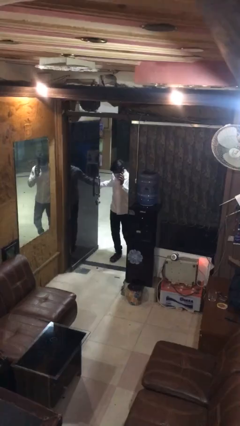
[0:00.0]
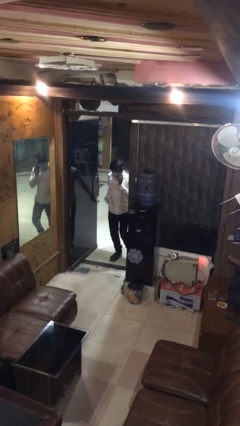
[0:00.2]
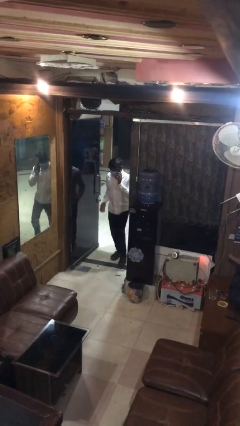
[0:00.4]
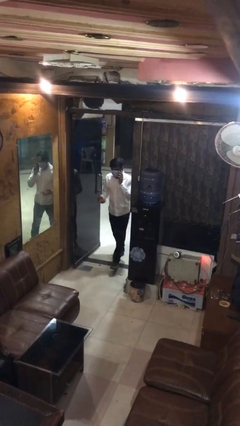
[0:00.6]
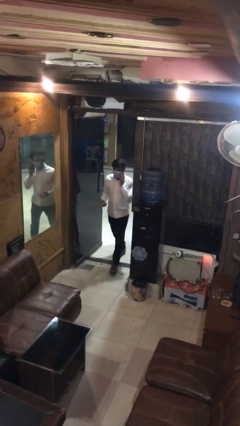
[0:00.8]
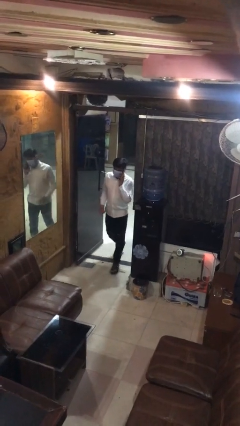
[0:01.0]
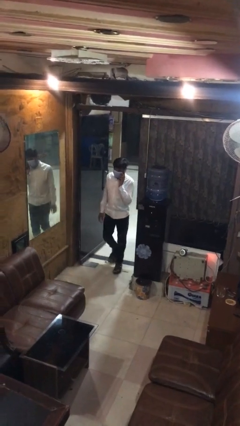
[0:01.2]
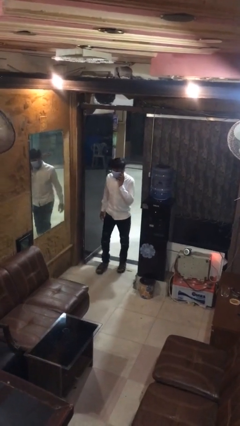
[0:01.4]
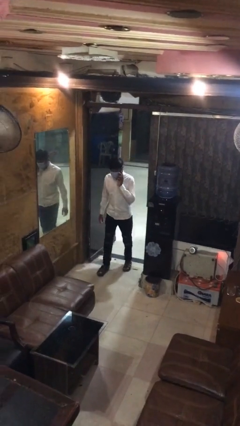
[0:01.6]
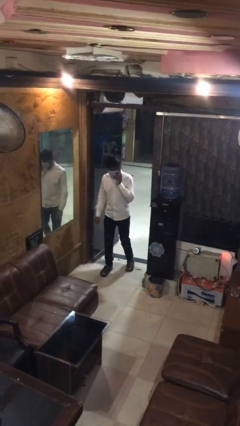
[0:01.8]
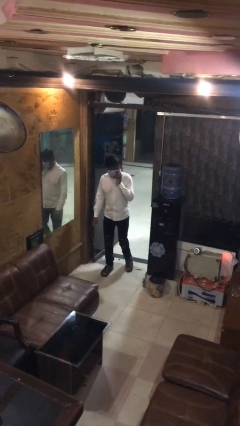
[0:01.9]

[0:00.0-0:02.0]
person enters scene through structure

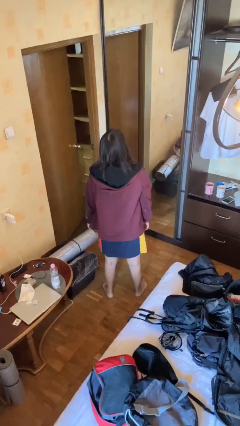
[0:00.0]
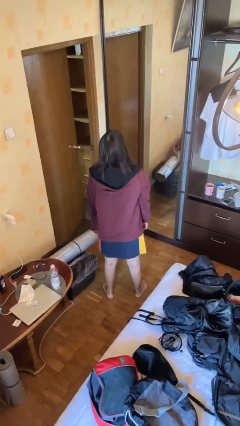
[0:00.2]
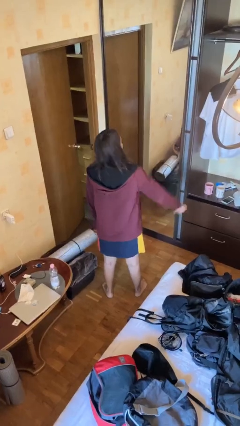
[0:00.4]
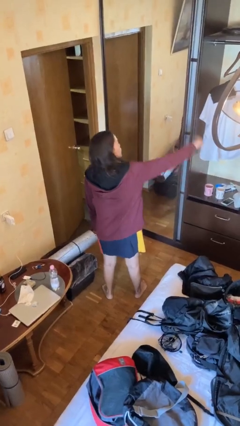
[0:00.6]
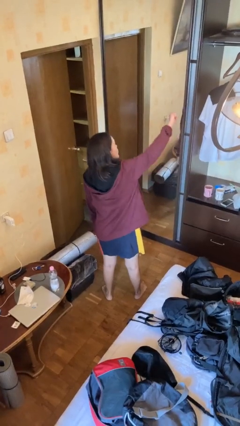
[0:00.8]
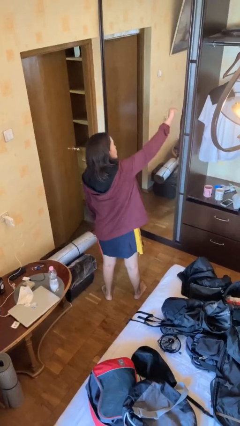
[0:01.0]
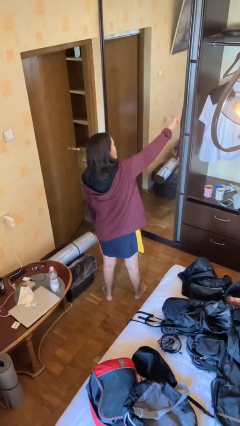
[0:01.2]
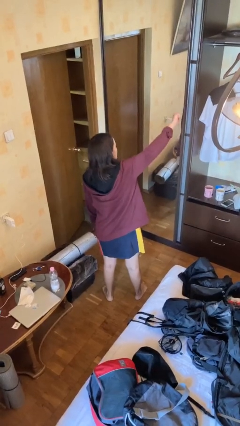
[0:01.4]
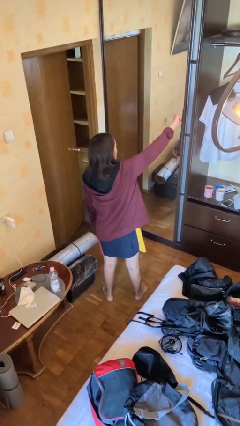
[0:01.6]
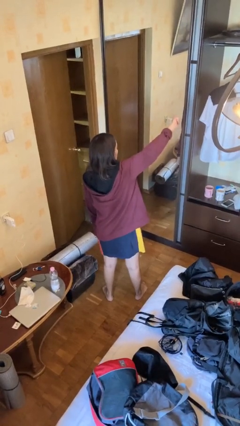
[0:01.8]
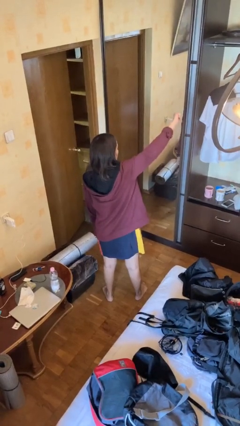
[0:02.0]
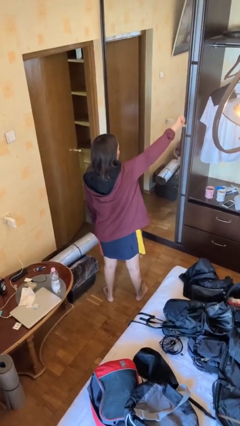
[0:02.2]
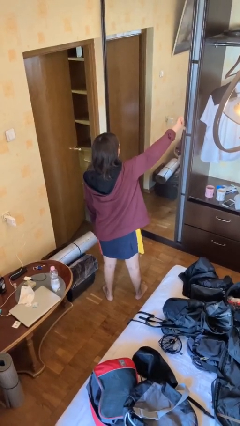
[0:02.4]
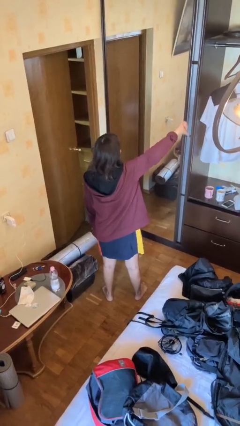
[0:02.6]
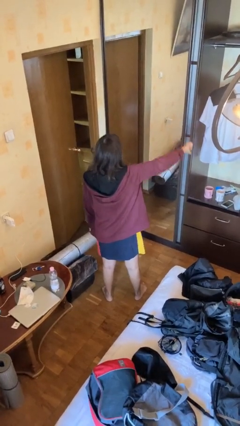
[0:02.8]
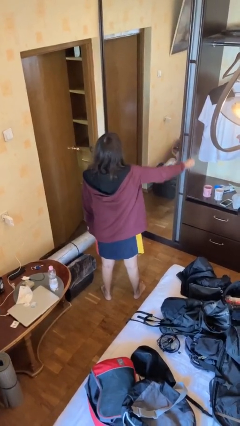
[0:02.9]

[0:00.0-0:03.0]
person gestures thumbs down

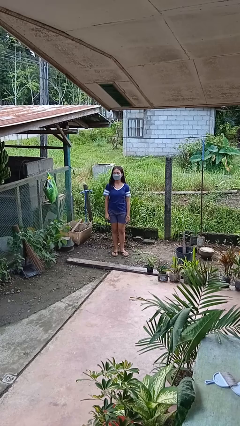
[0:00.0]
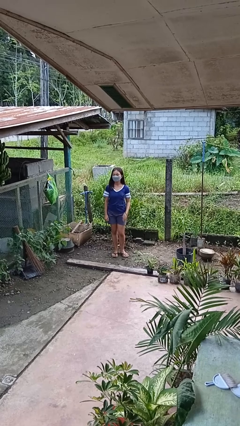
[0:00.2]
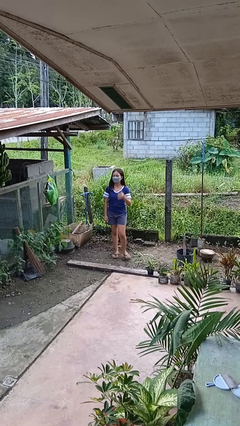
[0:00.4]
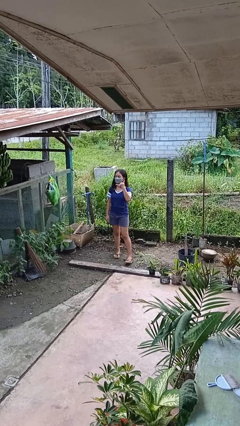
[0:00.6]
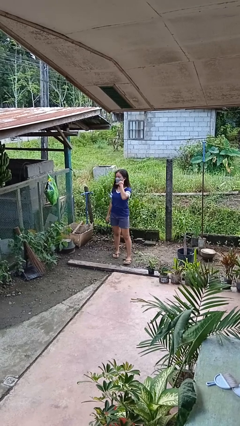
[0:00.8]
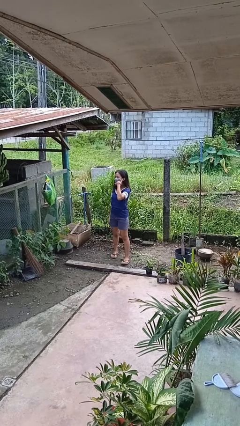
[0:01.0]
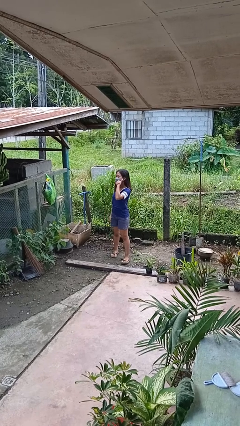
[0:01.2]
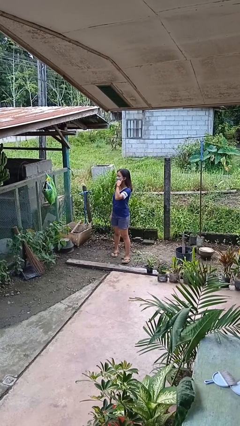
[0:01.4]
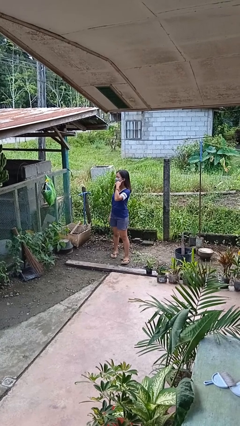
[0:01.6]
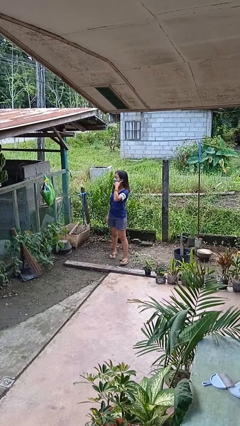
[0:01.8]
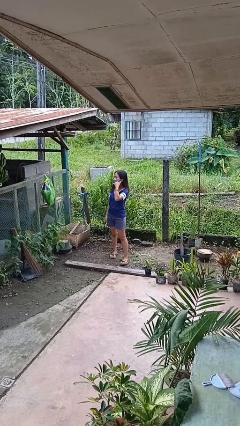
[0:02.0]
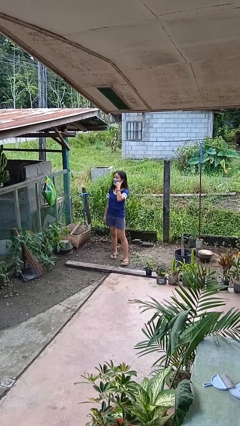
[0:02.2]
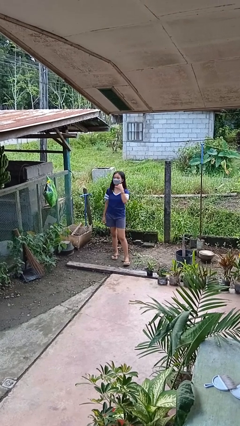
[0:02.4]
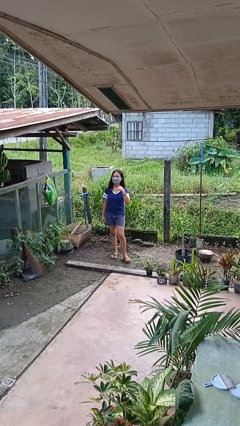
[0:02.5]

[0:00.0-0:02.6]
person gestures call me

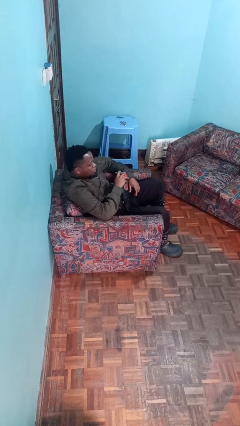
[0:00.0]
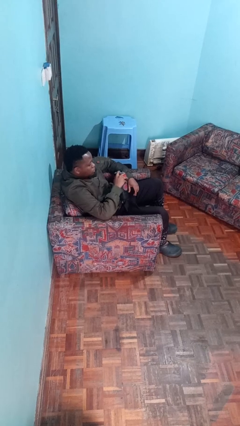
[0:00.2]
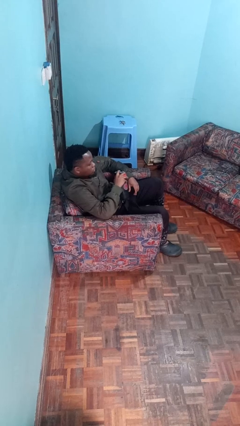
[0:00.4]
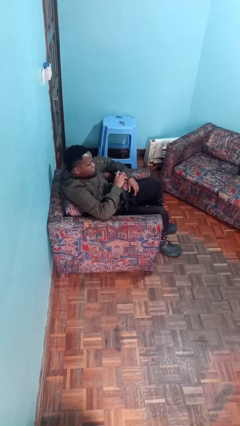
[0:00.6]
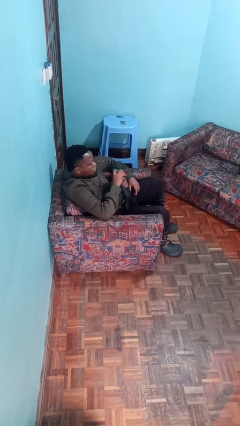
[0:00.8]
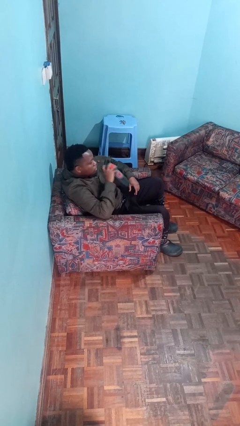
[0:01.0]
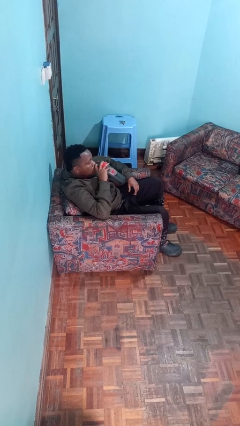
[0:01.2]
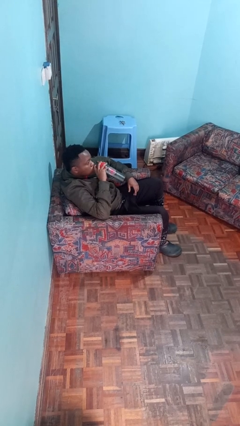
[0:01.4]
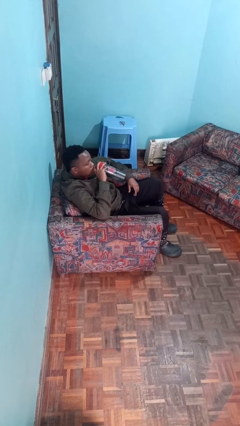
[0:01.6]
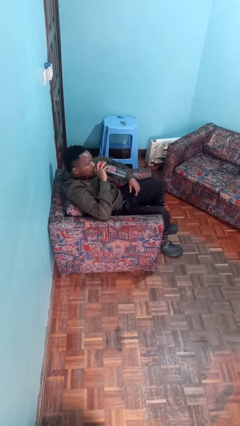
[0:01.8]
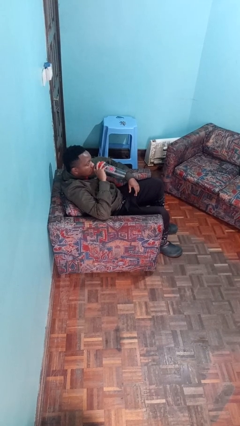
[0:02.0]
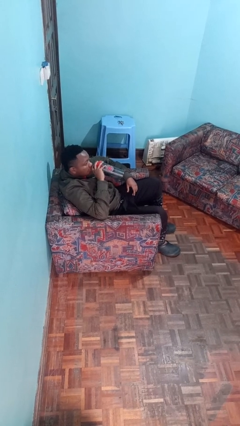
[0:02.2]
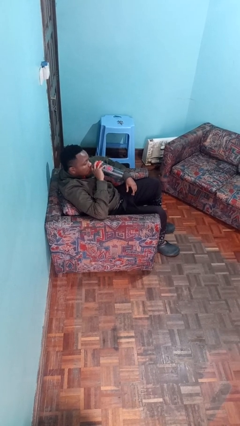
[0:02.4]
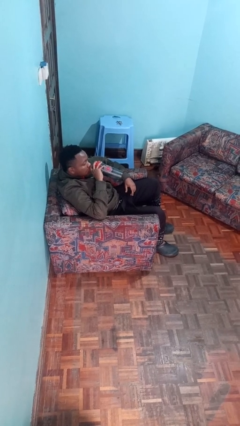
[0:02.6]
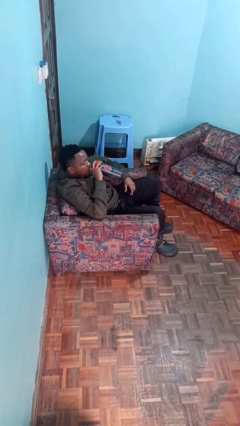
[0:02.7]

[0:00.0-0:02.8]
person drinks from bottle

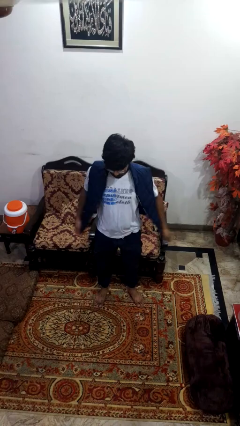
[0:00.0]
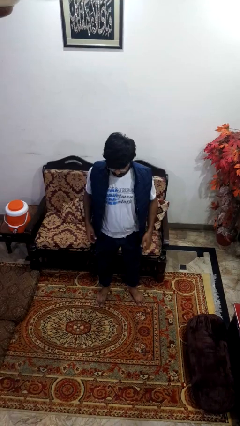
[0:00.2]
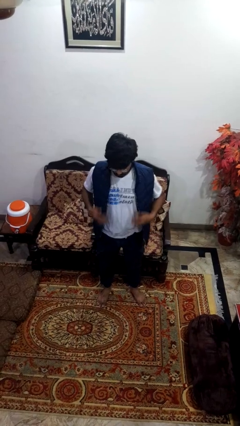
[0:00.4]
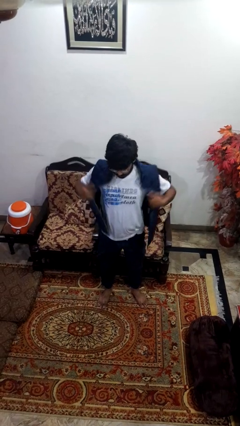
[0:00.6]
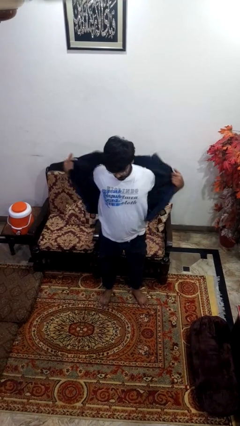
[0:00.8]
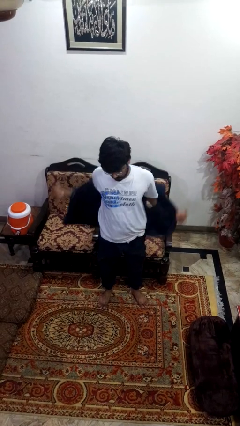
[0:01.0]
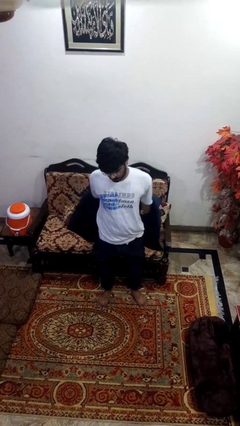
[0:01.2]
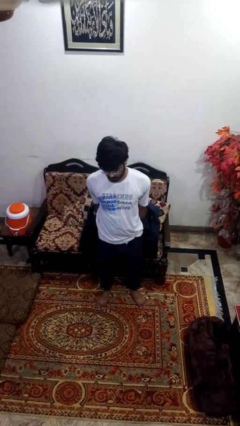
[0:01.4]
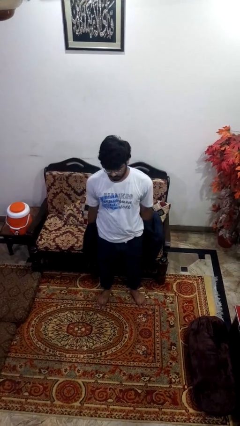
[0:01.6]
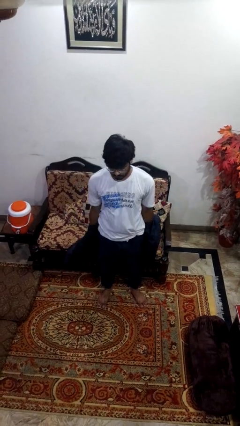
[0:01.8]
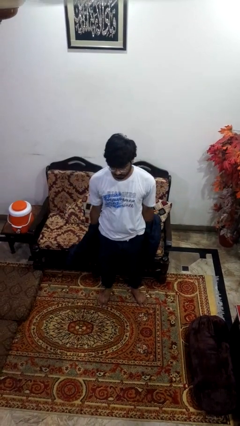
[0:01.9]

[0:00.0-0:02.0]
person takes off jacket

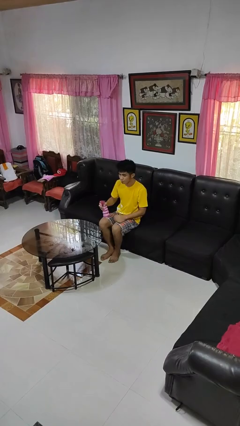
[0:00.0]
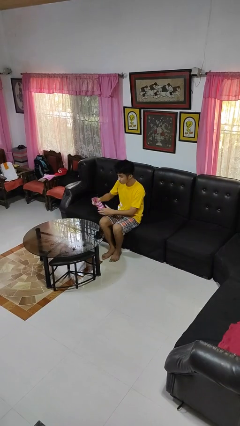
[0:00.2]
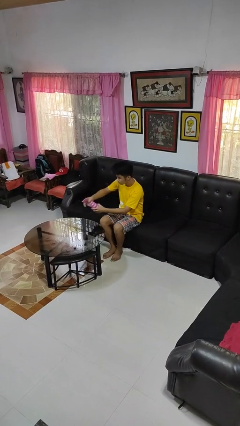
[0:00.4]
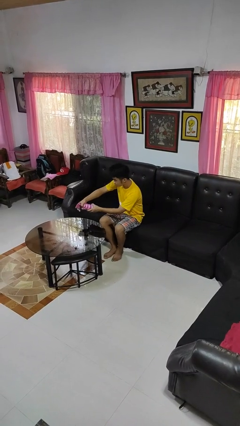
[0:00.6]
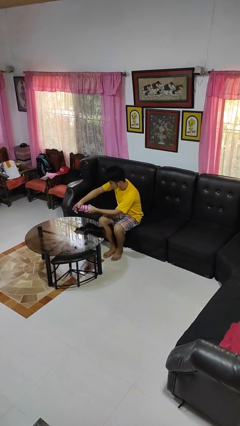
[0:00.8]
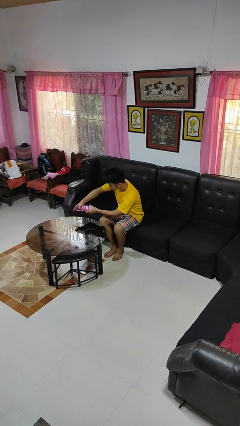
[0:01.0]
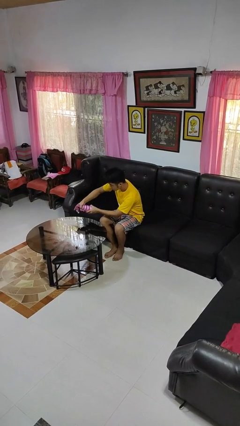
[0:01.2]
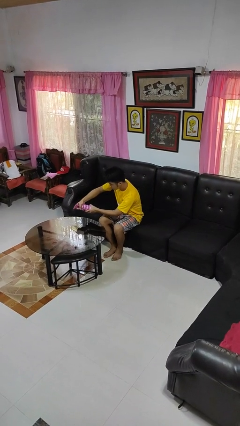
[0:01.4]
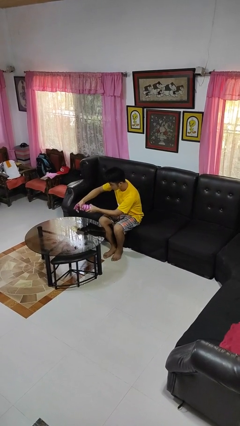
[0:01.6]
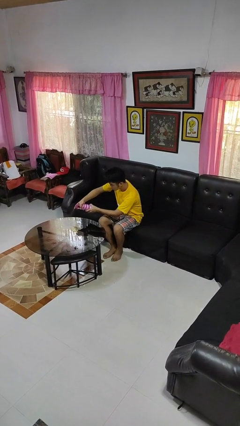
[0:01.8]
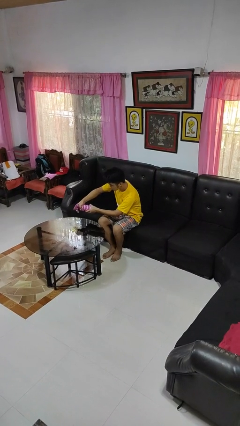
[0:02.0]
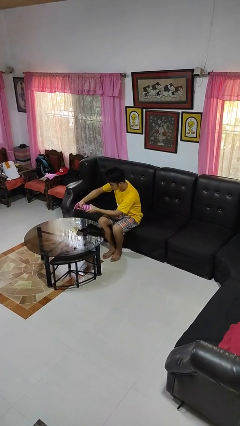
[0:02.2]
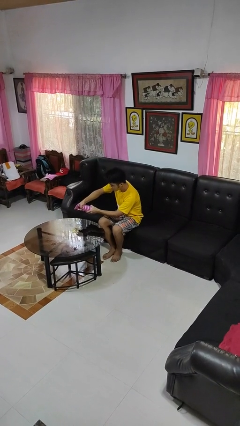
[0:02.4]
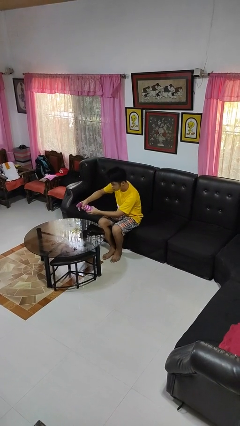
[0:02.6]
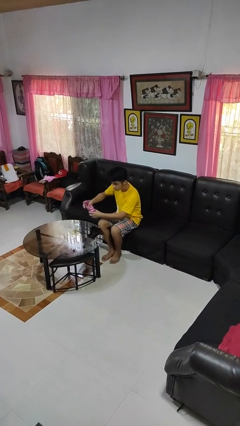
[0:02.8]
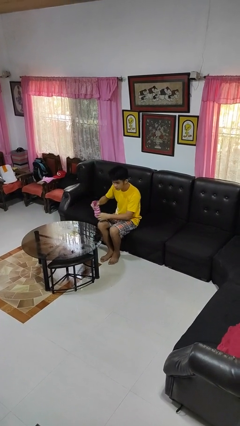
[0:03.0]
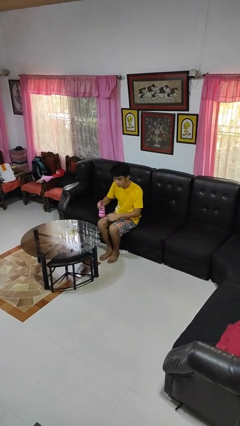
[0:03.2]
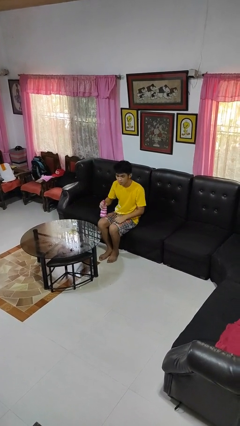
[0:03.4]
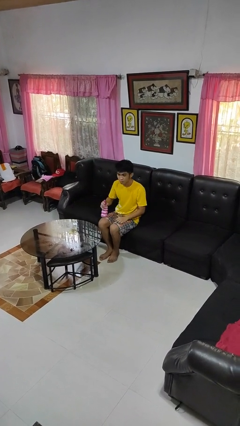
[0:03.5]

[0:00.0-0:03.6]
person sprays from bottle

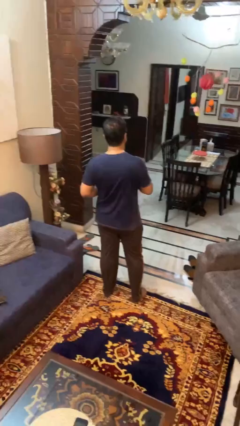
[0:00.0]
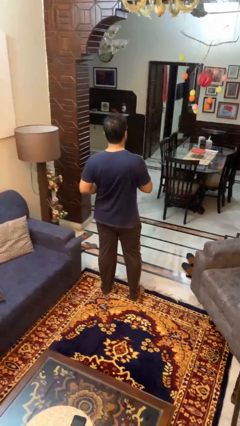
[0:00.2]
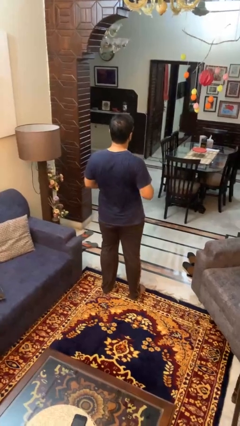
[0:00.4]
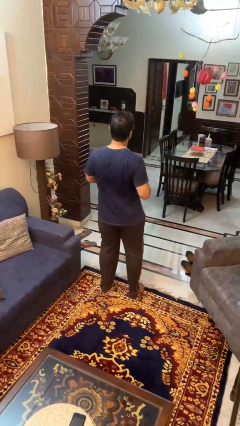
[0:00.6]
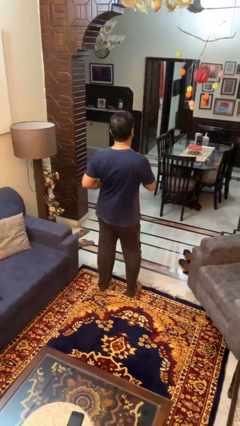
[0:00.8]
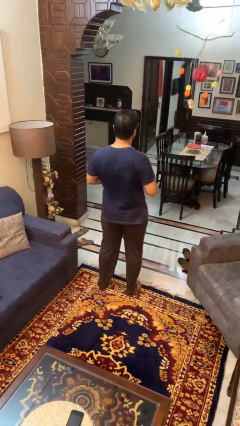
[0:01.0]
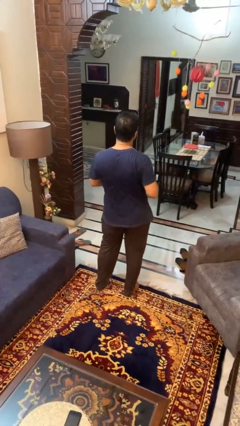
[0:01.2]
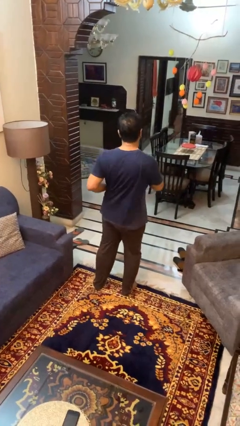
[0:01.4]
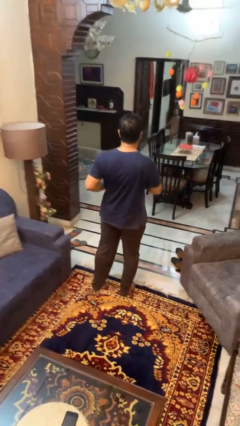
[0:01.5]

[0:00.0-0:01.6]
person wiggles hips
